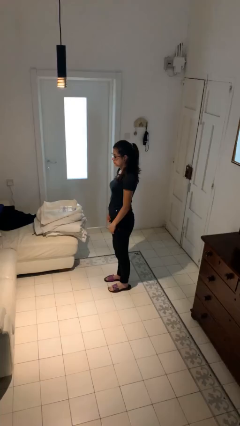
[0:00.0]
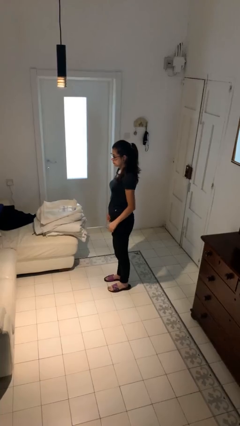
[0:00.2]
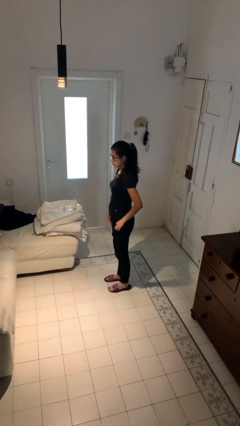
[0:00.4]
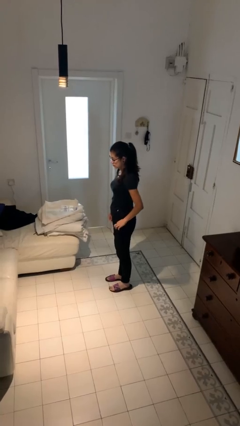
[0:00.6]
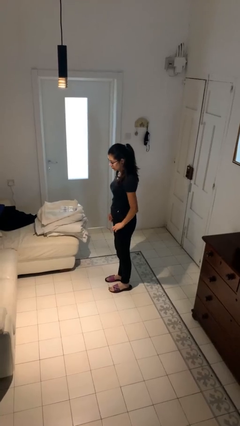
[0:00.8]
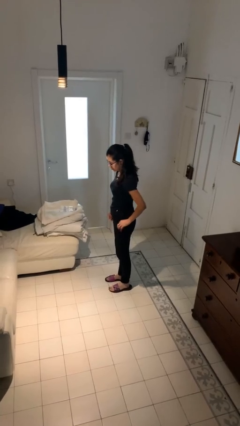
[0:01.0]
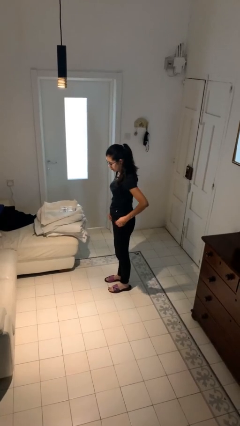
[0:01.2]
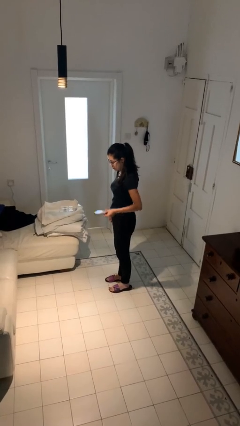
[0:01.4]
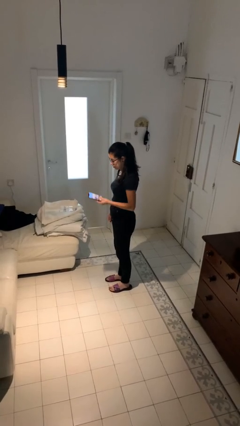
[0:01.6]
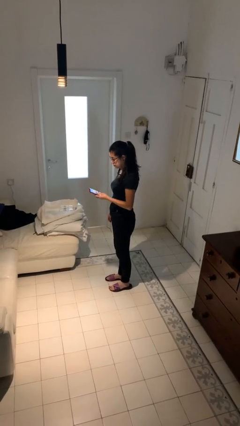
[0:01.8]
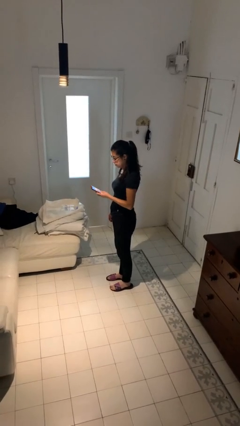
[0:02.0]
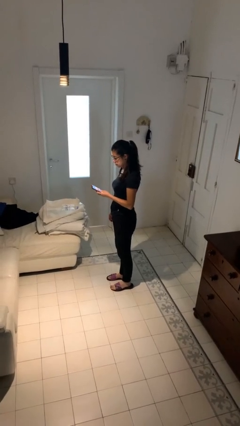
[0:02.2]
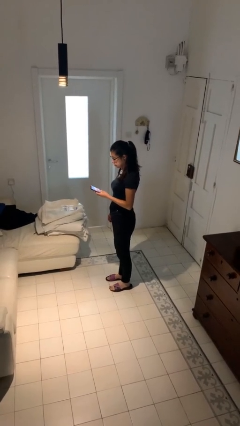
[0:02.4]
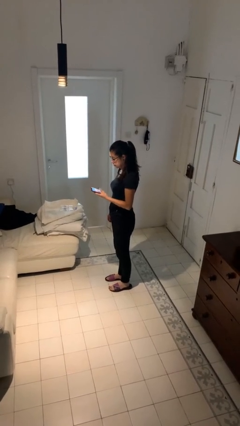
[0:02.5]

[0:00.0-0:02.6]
person takes phone from pocket

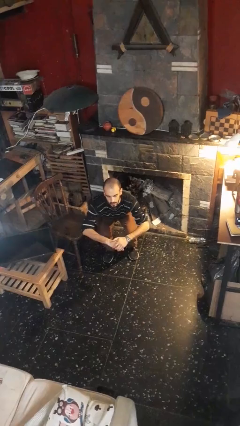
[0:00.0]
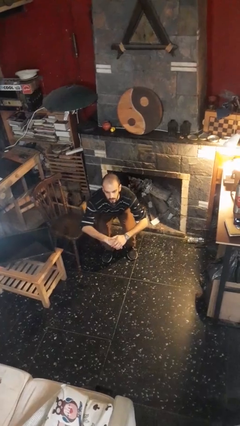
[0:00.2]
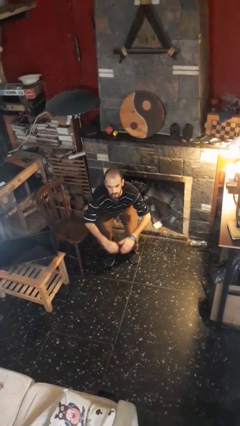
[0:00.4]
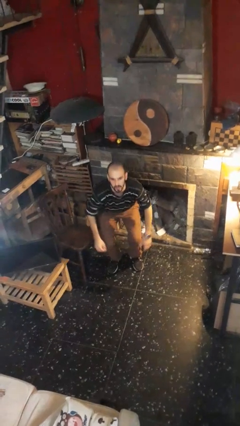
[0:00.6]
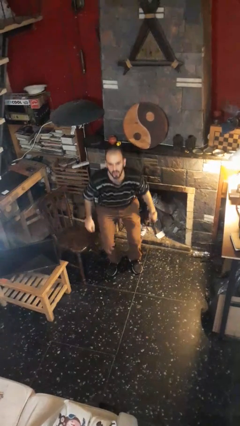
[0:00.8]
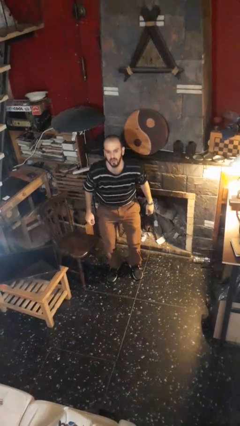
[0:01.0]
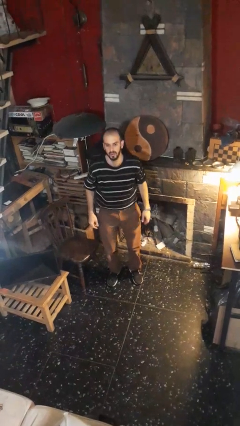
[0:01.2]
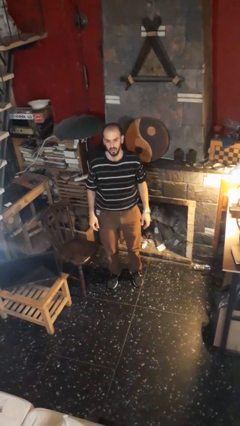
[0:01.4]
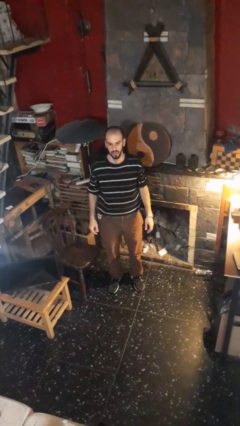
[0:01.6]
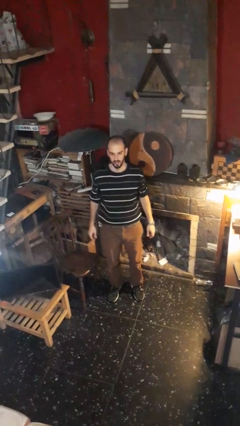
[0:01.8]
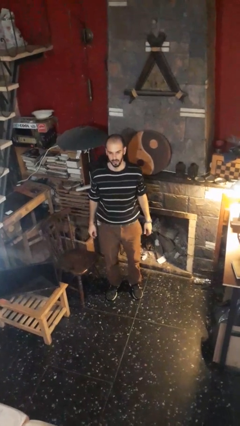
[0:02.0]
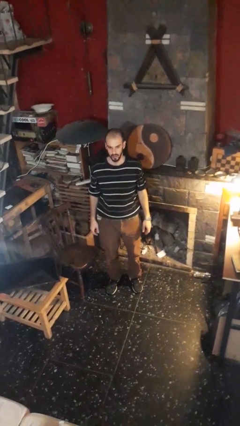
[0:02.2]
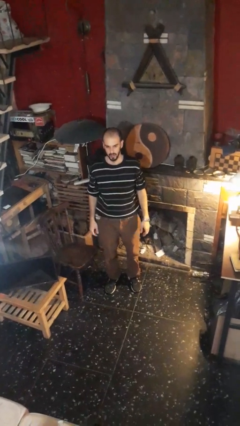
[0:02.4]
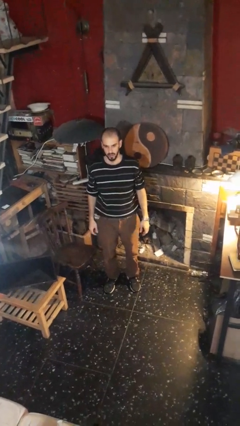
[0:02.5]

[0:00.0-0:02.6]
person stands up

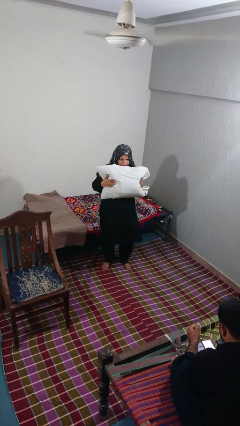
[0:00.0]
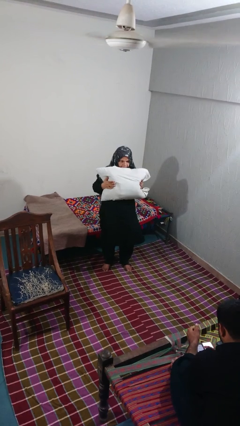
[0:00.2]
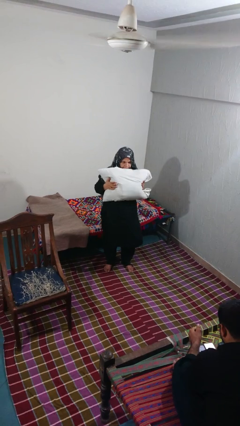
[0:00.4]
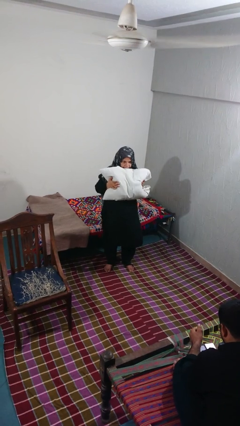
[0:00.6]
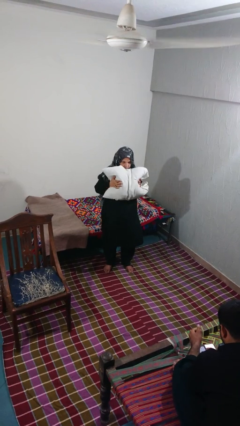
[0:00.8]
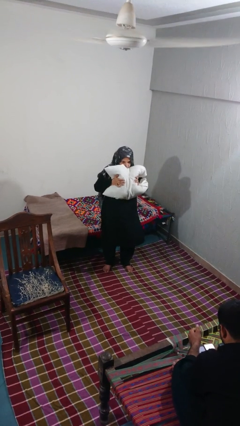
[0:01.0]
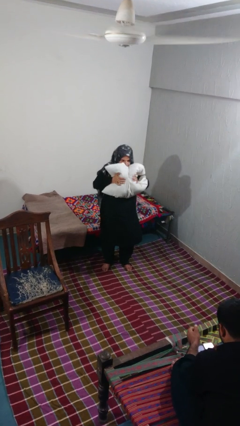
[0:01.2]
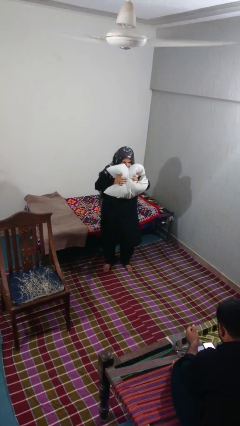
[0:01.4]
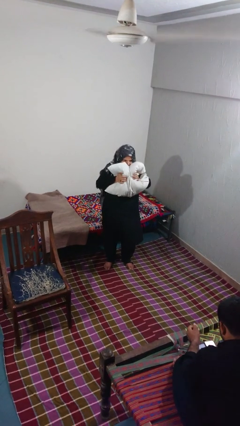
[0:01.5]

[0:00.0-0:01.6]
person squeezes object

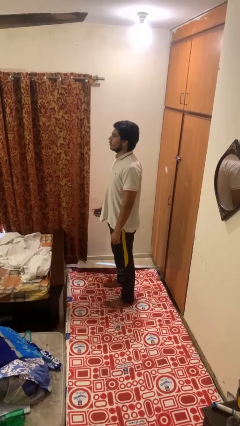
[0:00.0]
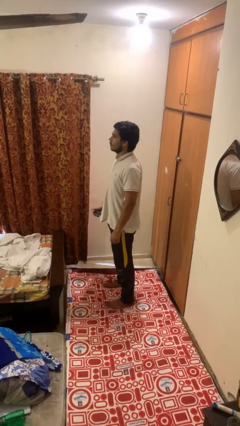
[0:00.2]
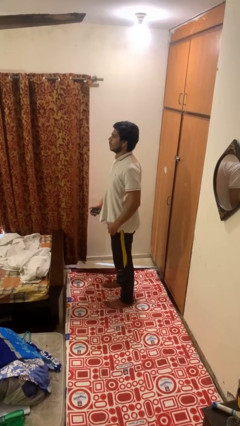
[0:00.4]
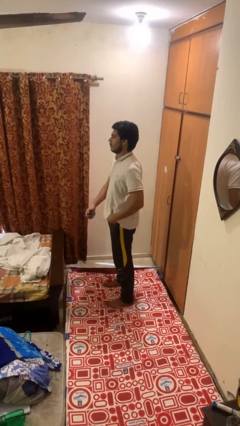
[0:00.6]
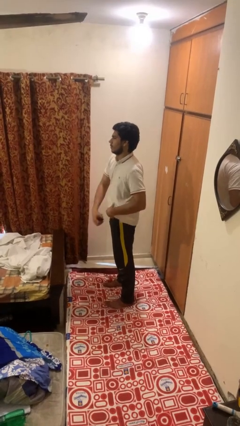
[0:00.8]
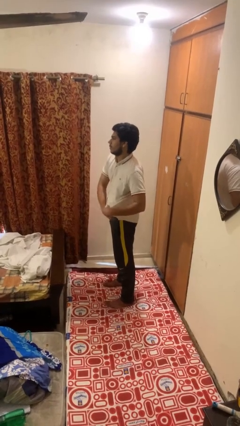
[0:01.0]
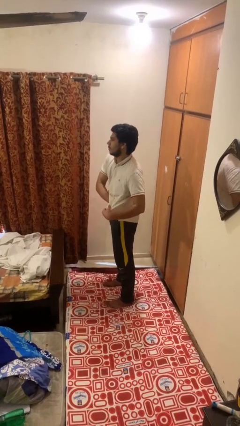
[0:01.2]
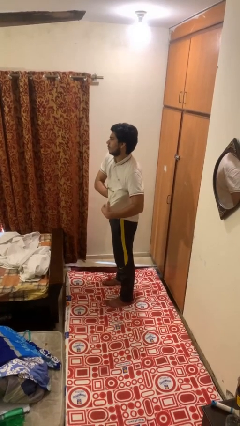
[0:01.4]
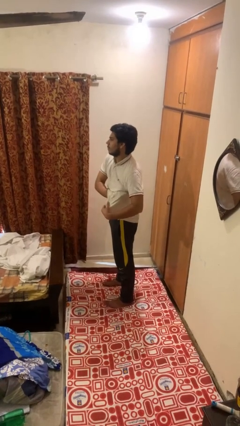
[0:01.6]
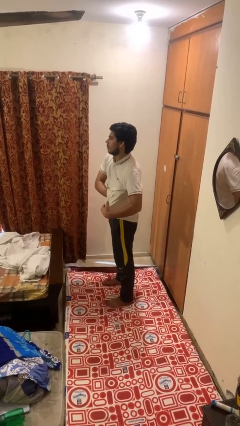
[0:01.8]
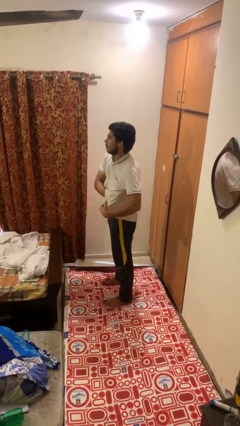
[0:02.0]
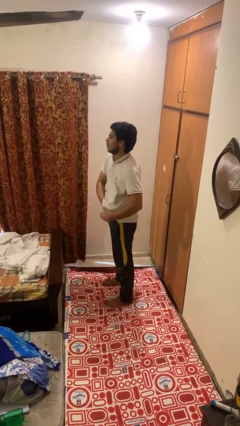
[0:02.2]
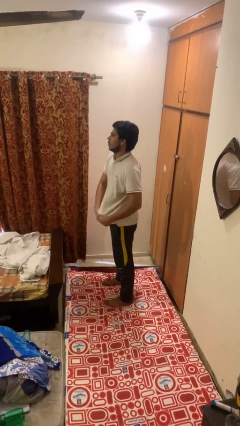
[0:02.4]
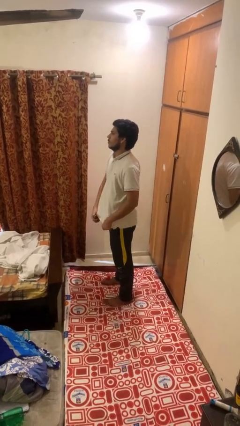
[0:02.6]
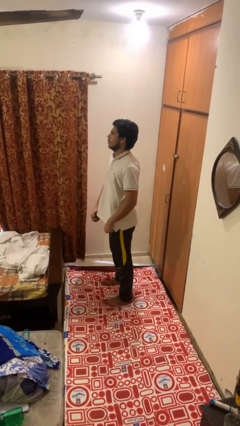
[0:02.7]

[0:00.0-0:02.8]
person applies deodorant

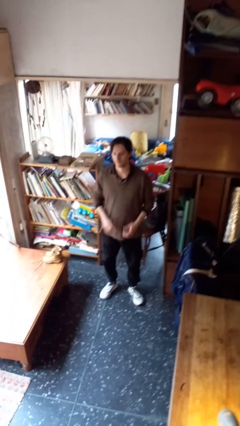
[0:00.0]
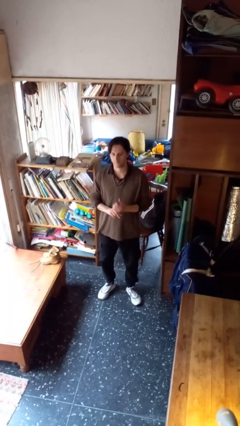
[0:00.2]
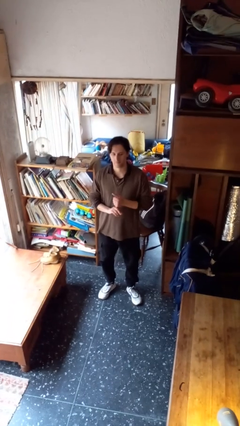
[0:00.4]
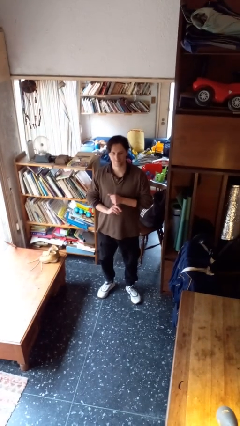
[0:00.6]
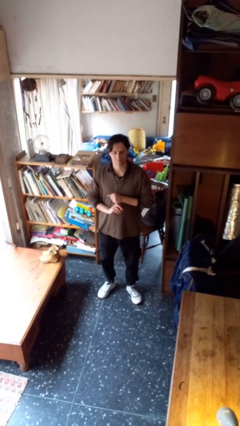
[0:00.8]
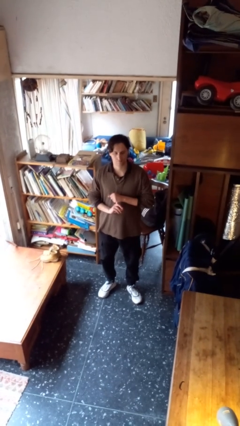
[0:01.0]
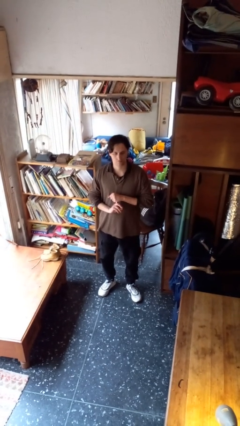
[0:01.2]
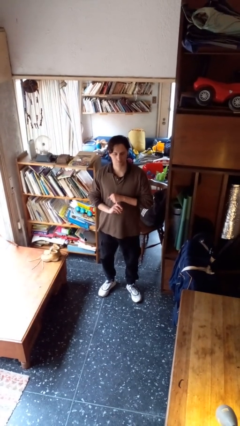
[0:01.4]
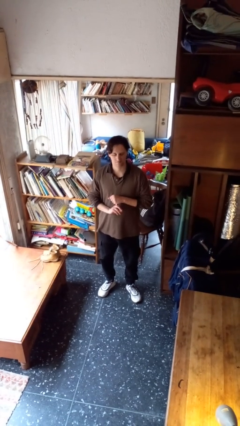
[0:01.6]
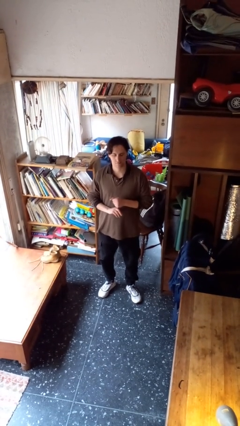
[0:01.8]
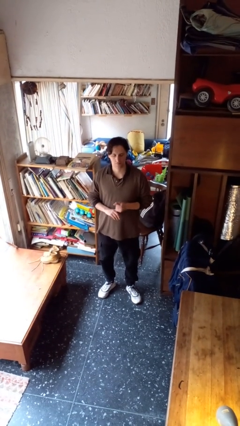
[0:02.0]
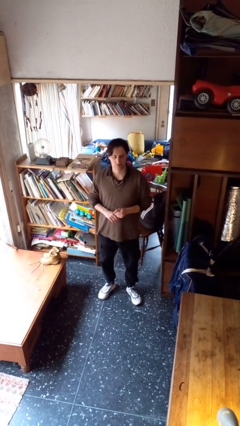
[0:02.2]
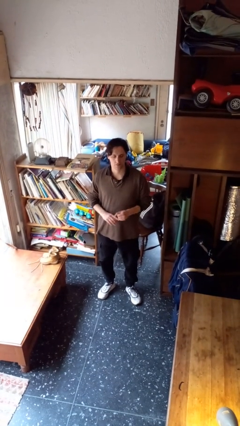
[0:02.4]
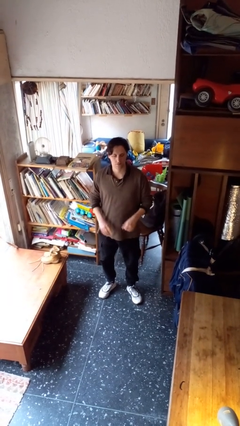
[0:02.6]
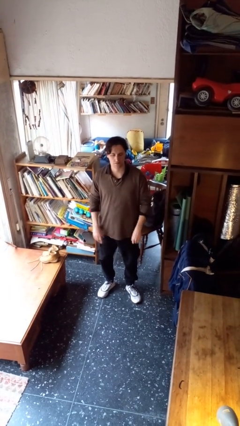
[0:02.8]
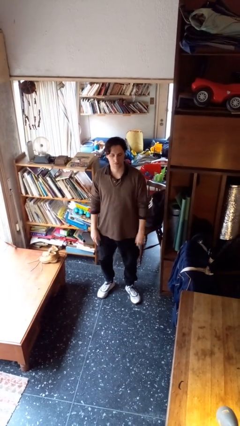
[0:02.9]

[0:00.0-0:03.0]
person cracks knuckles

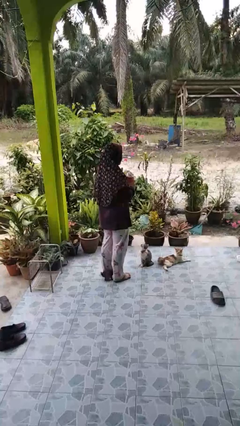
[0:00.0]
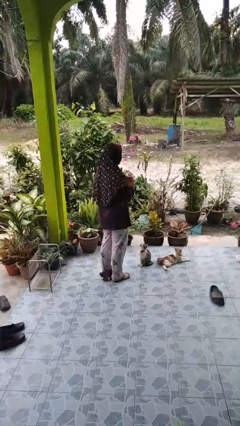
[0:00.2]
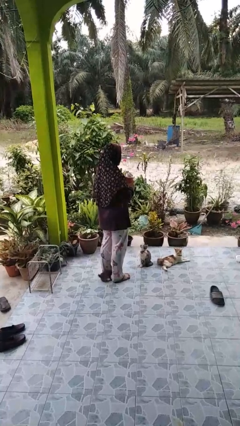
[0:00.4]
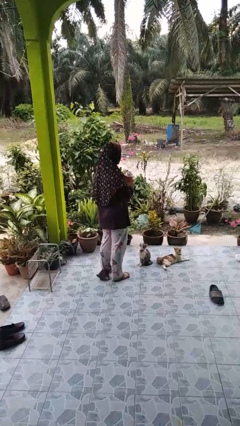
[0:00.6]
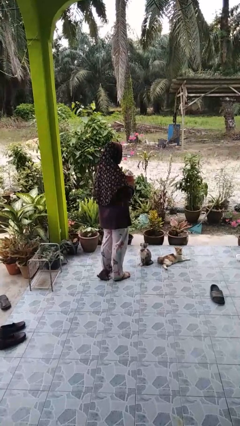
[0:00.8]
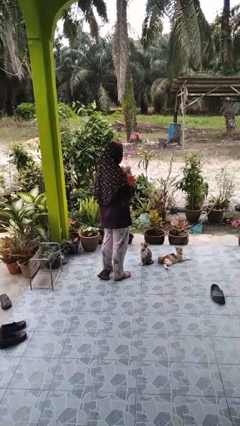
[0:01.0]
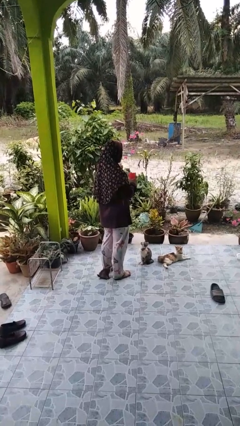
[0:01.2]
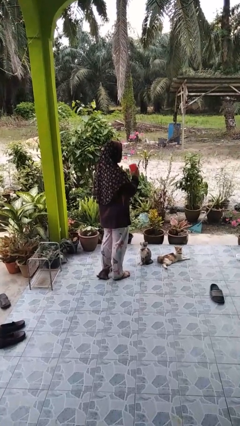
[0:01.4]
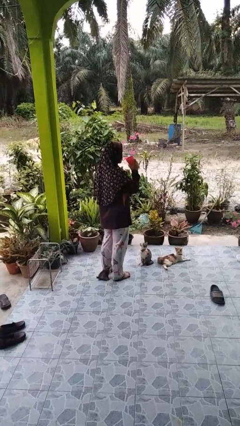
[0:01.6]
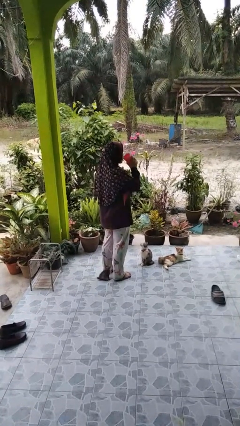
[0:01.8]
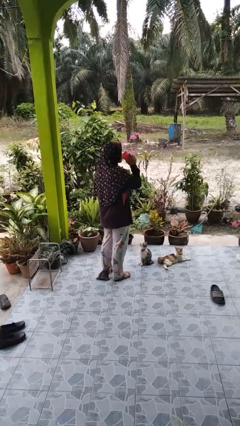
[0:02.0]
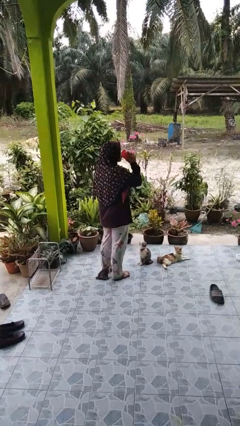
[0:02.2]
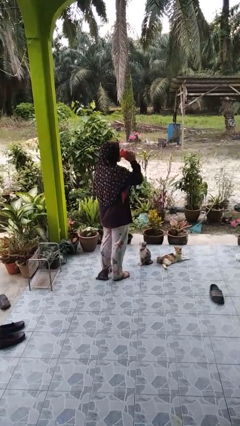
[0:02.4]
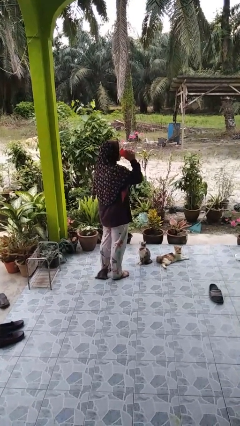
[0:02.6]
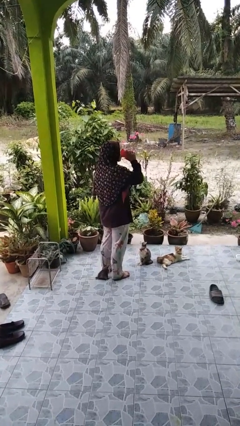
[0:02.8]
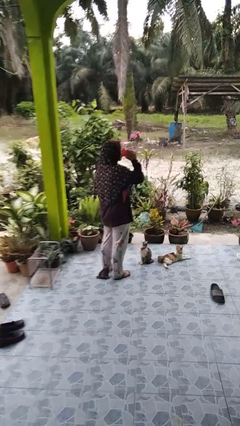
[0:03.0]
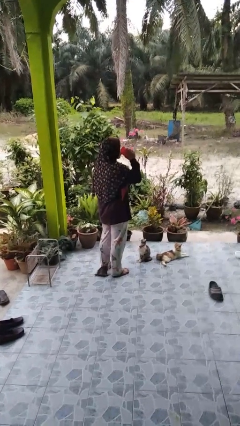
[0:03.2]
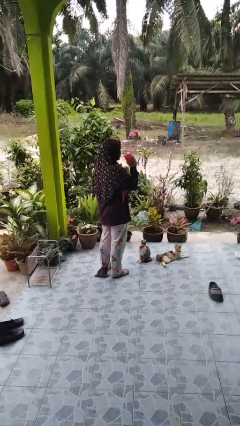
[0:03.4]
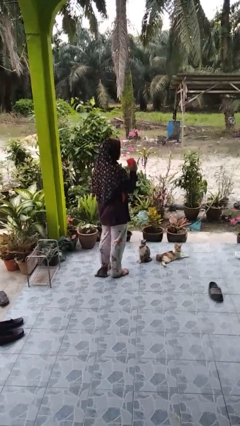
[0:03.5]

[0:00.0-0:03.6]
person drinks from bottle

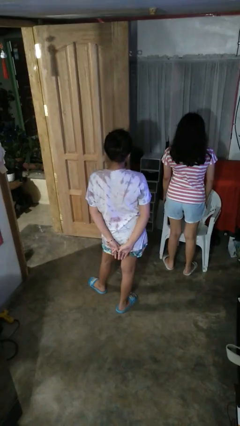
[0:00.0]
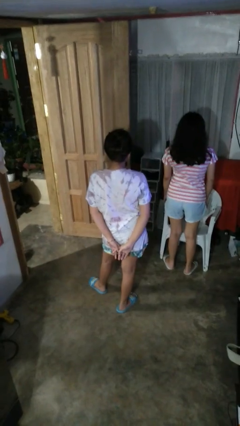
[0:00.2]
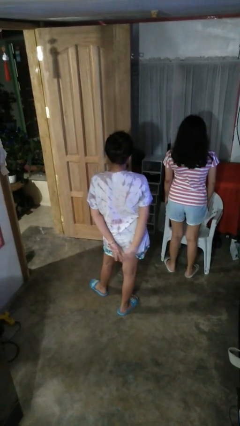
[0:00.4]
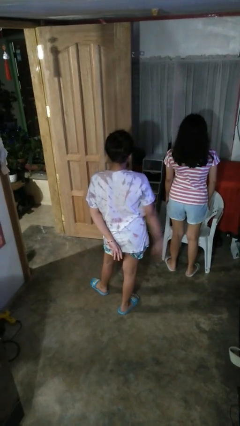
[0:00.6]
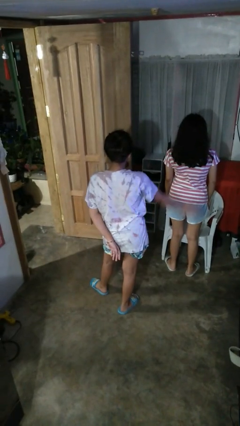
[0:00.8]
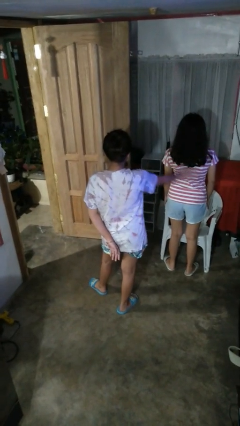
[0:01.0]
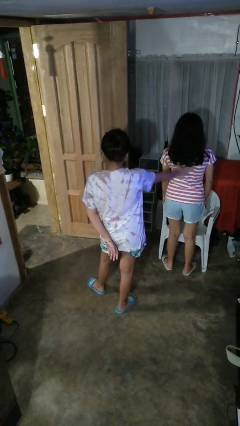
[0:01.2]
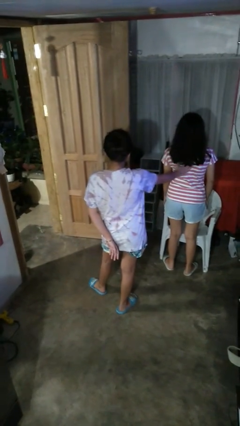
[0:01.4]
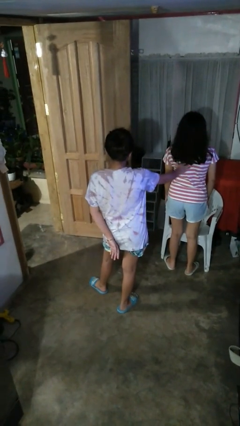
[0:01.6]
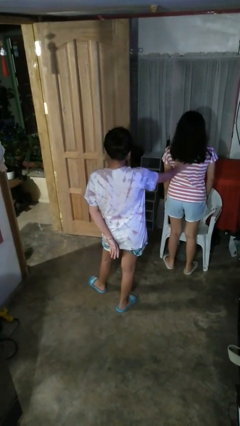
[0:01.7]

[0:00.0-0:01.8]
person touches back of person
